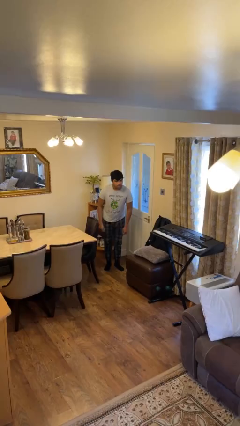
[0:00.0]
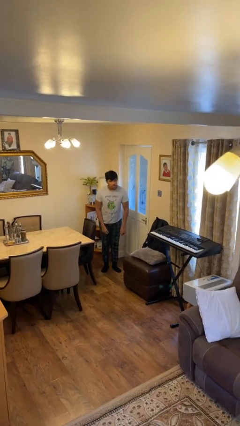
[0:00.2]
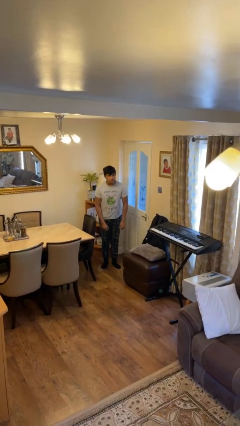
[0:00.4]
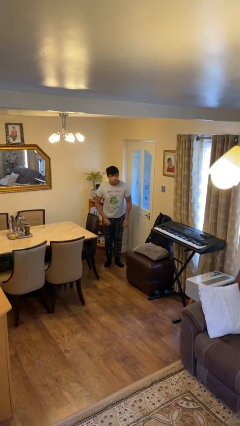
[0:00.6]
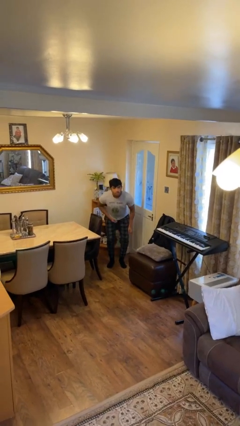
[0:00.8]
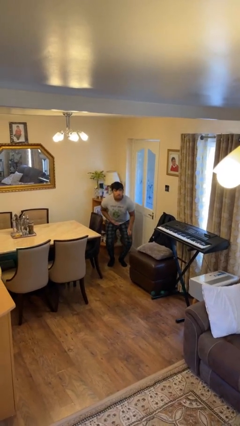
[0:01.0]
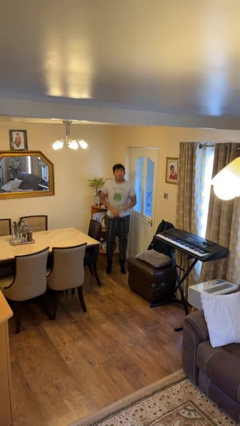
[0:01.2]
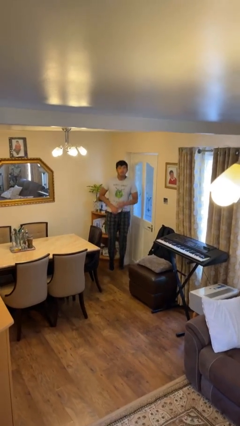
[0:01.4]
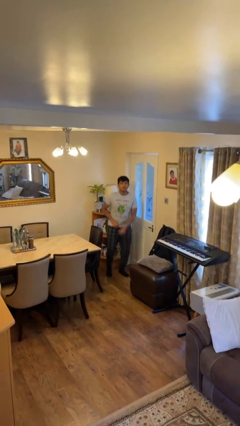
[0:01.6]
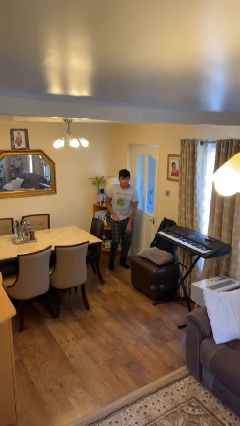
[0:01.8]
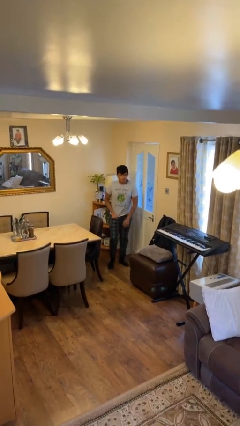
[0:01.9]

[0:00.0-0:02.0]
person jumps

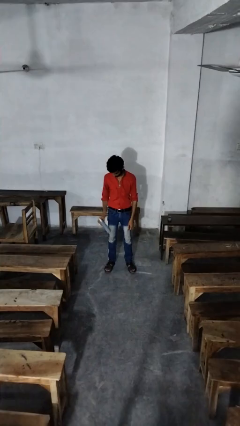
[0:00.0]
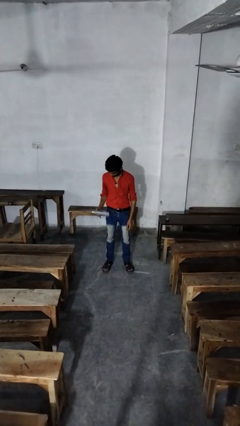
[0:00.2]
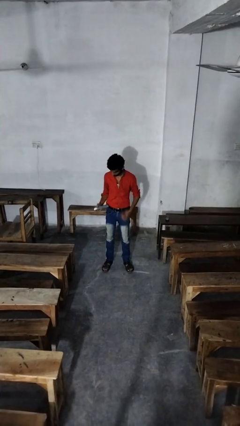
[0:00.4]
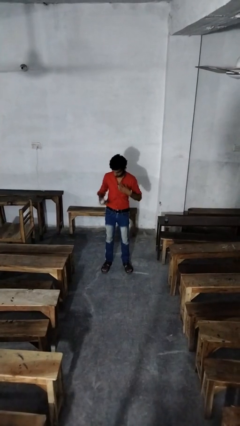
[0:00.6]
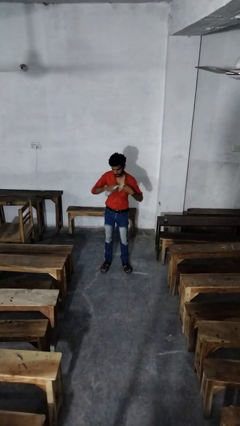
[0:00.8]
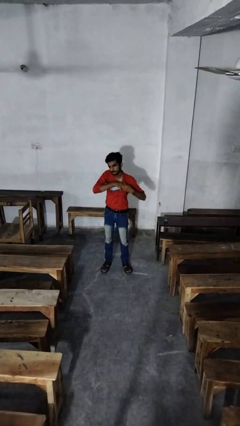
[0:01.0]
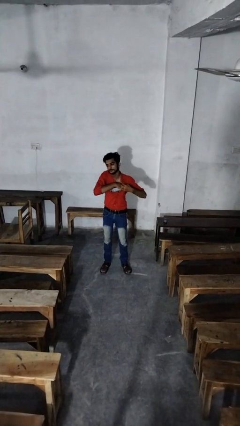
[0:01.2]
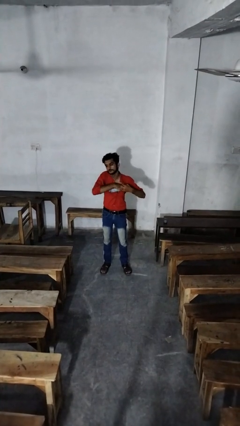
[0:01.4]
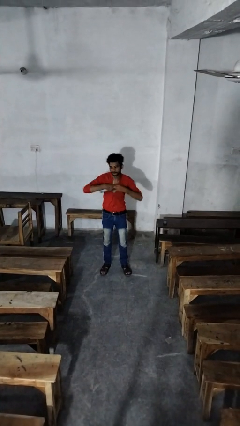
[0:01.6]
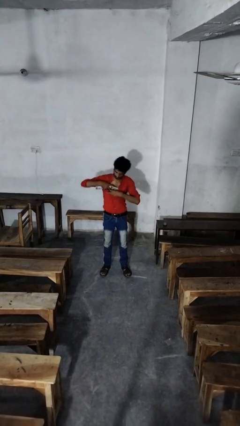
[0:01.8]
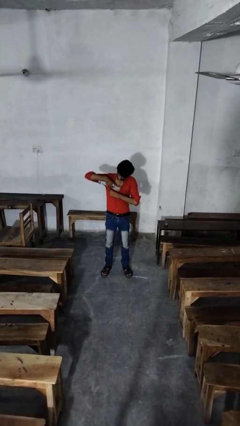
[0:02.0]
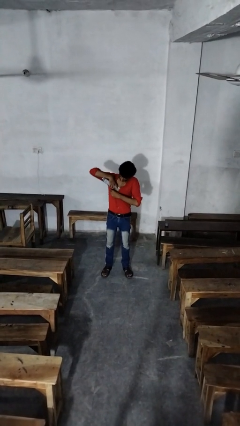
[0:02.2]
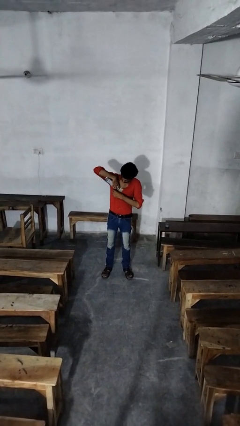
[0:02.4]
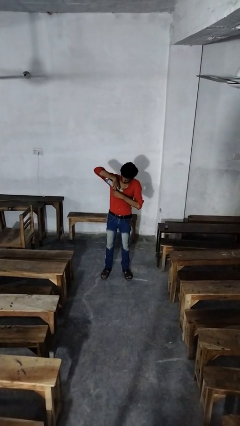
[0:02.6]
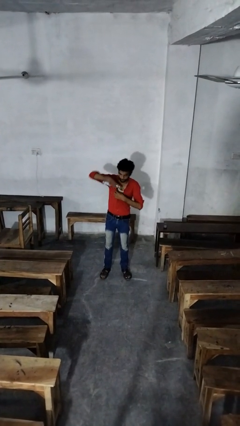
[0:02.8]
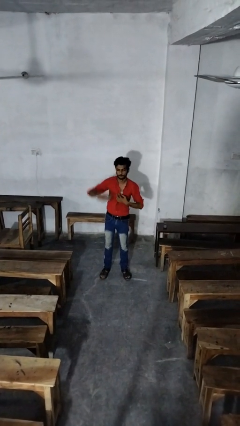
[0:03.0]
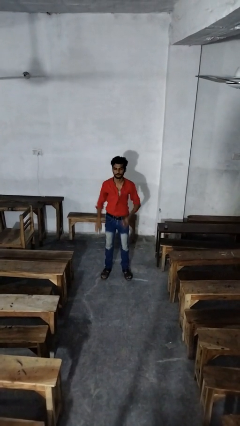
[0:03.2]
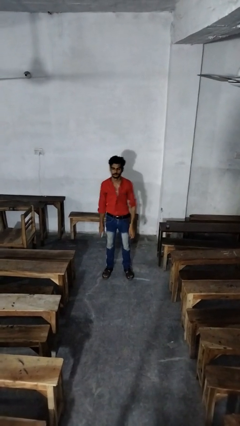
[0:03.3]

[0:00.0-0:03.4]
person applies deodorant

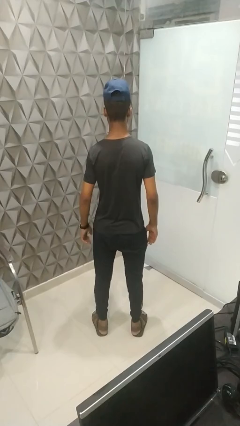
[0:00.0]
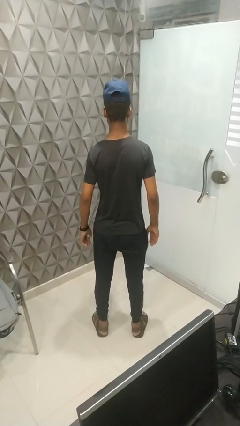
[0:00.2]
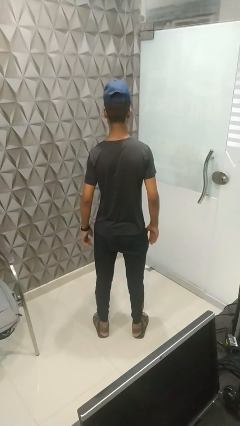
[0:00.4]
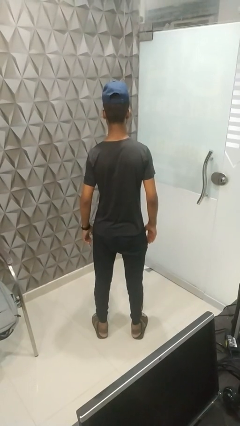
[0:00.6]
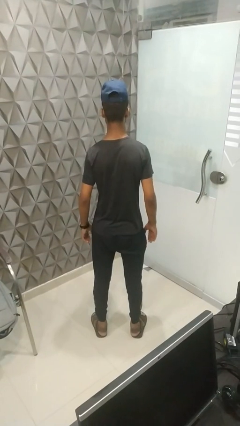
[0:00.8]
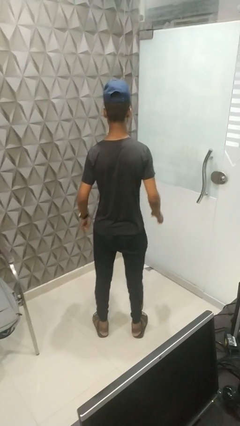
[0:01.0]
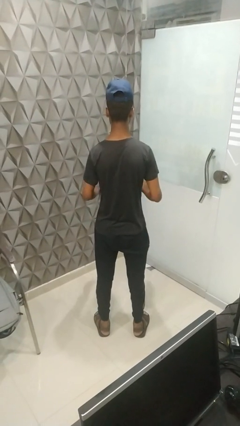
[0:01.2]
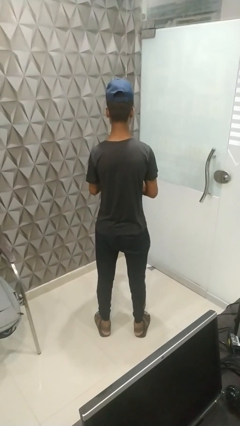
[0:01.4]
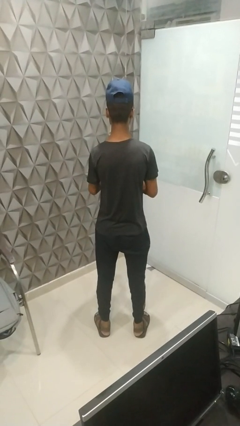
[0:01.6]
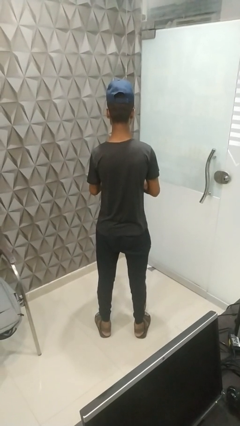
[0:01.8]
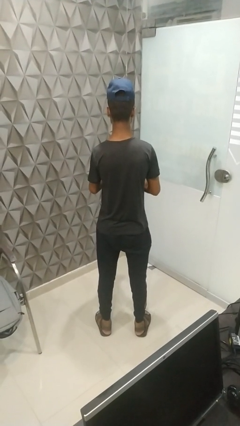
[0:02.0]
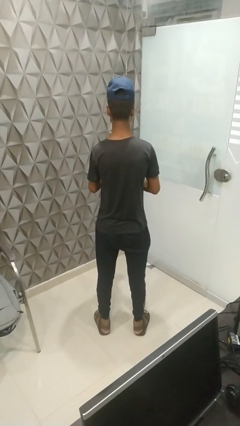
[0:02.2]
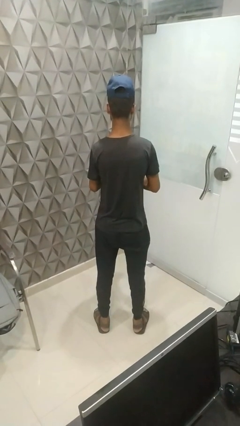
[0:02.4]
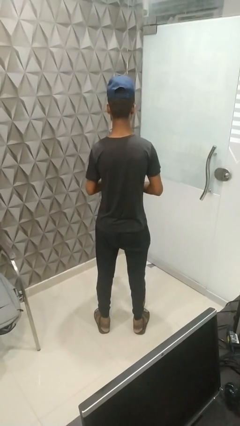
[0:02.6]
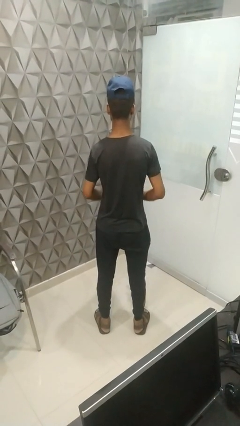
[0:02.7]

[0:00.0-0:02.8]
person claps hands

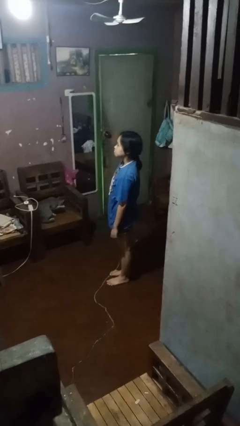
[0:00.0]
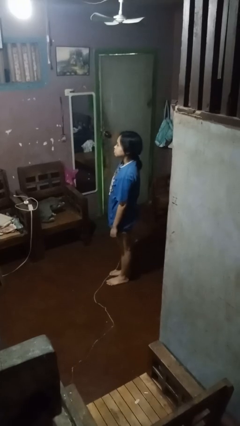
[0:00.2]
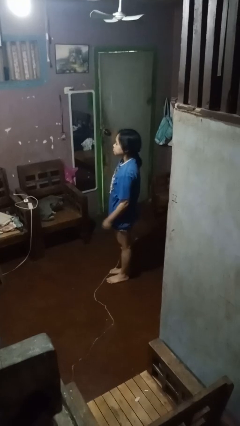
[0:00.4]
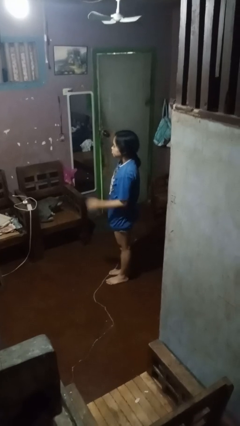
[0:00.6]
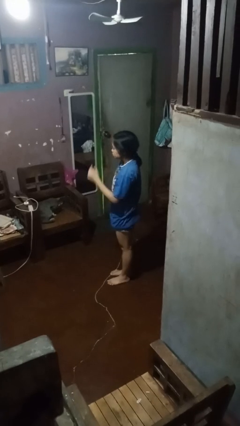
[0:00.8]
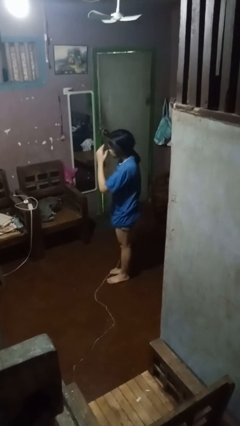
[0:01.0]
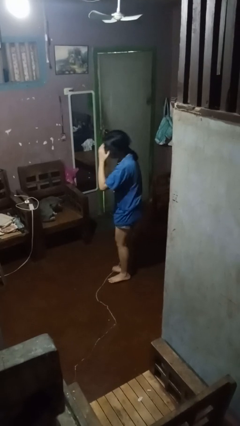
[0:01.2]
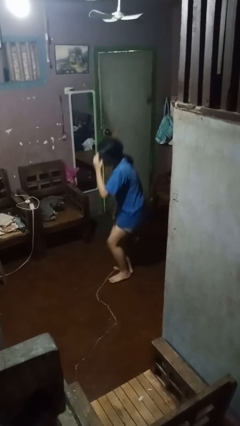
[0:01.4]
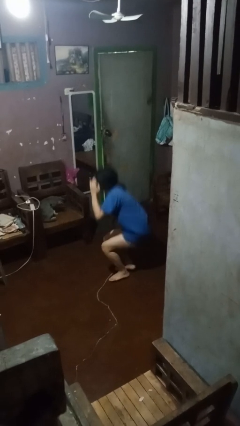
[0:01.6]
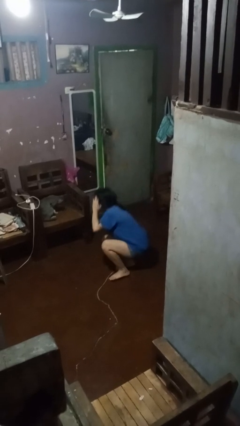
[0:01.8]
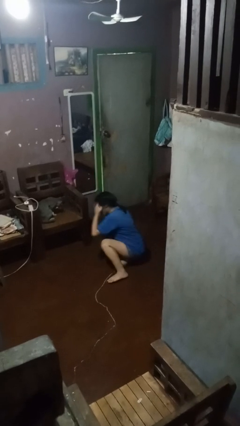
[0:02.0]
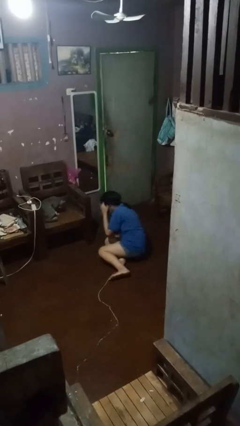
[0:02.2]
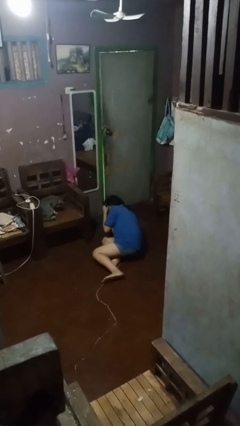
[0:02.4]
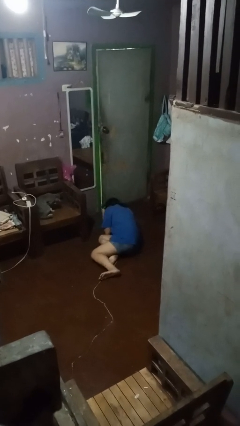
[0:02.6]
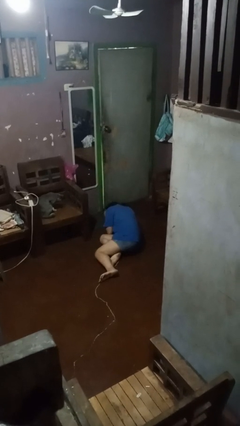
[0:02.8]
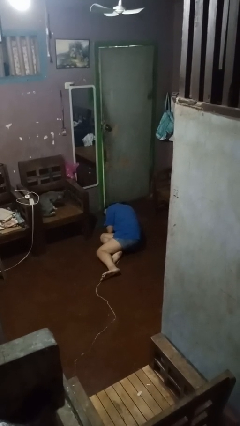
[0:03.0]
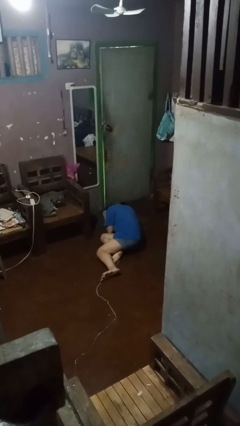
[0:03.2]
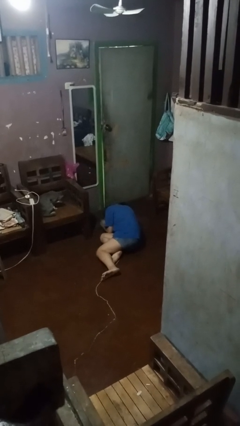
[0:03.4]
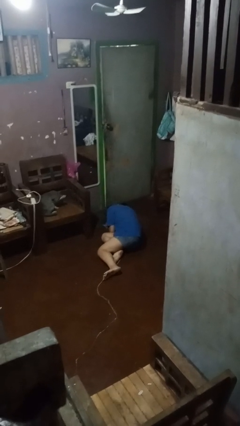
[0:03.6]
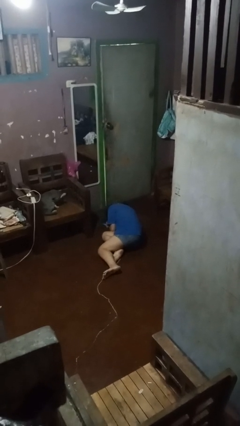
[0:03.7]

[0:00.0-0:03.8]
person falls while standing

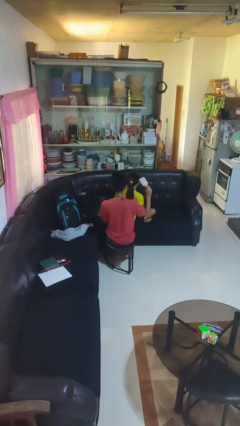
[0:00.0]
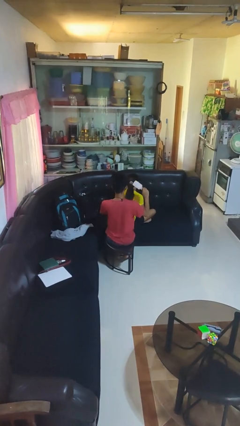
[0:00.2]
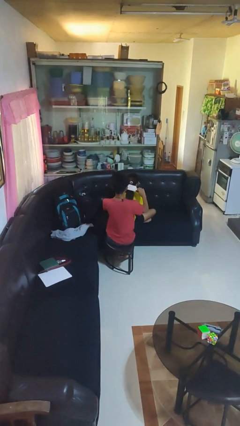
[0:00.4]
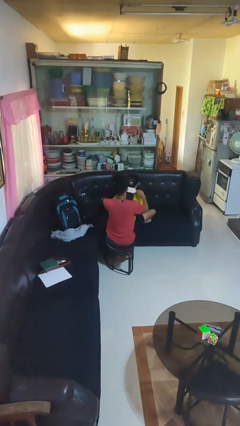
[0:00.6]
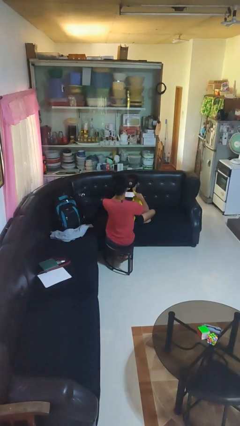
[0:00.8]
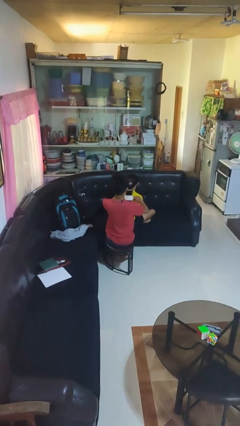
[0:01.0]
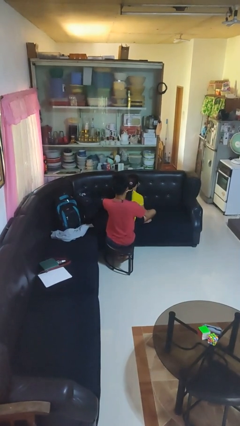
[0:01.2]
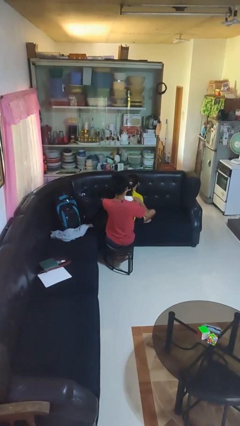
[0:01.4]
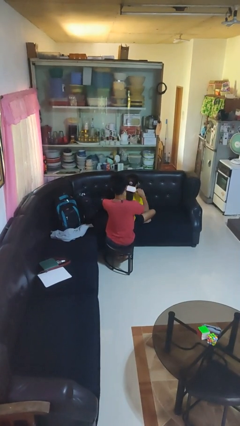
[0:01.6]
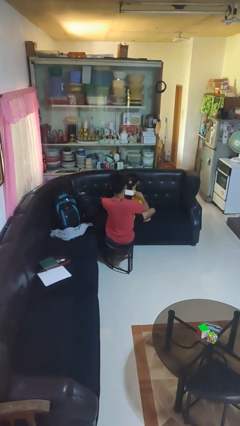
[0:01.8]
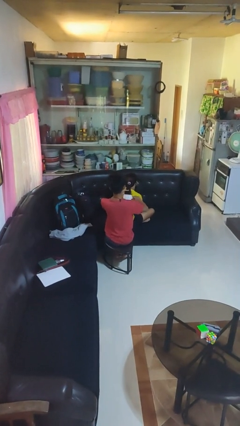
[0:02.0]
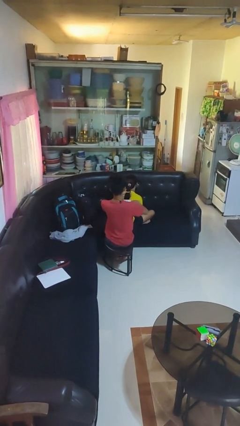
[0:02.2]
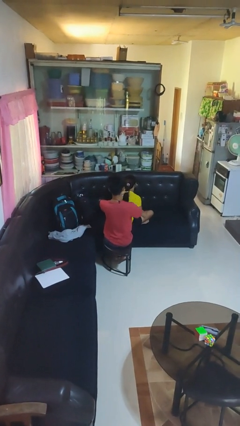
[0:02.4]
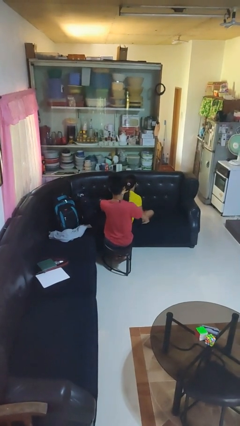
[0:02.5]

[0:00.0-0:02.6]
person brushes hair of person

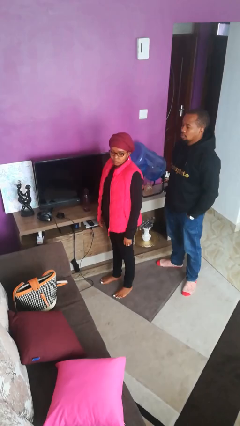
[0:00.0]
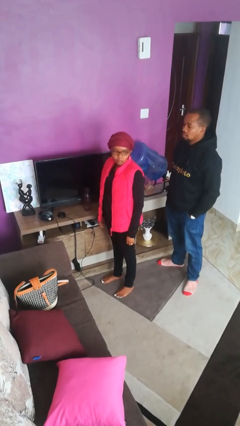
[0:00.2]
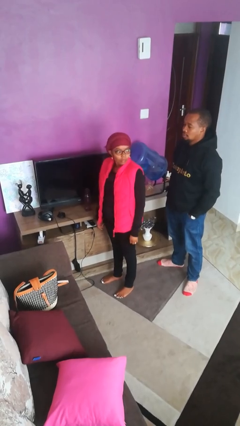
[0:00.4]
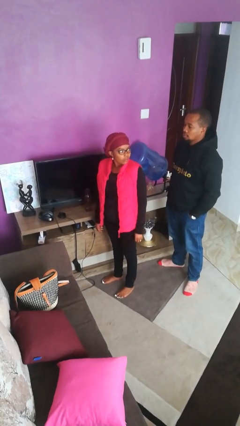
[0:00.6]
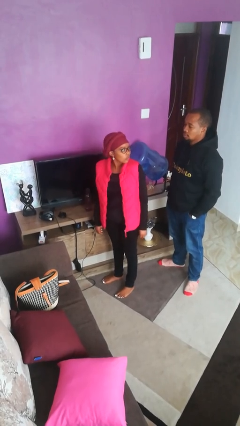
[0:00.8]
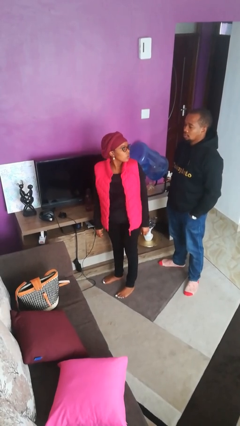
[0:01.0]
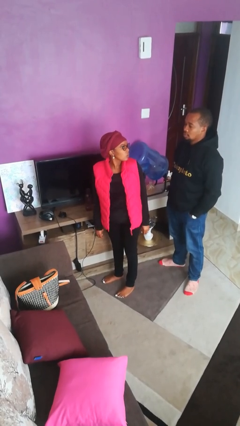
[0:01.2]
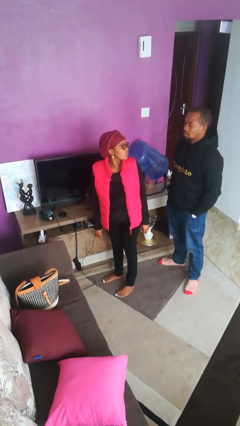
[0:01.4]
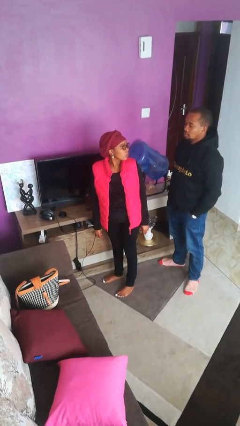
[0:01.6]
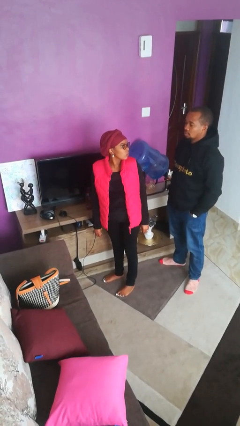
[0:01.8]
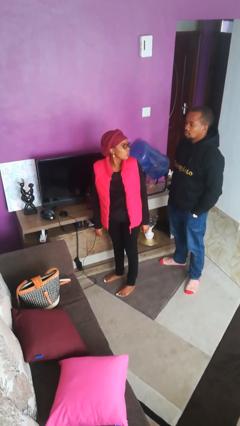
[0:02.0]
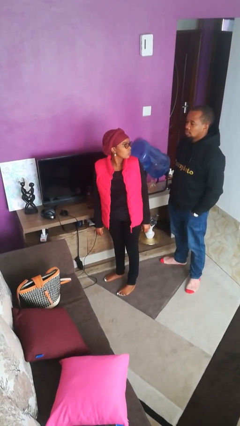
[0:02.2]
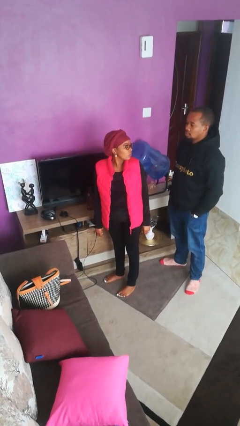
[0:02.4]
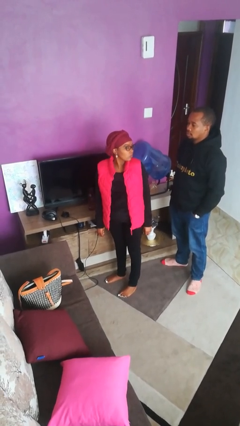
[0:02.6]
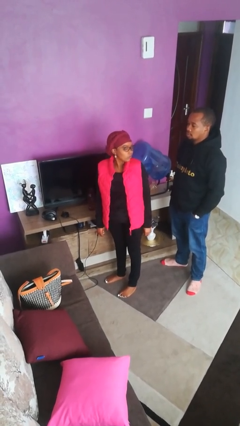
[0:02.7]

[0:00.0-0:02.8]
person looks over shoulder

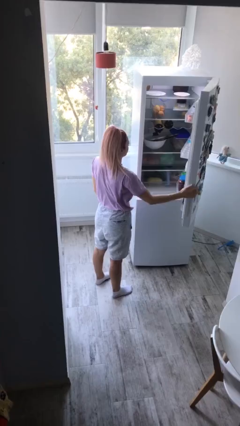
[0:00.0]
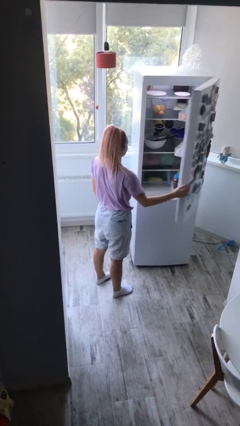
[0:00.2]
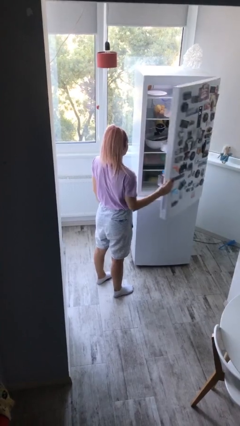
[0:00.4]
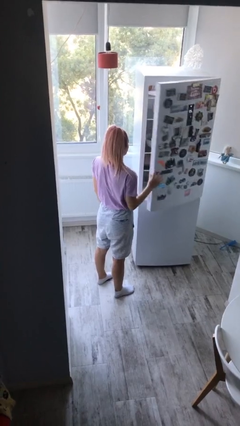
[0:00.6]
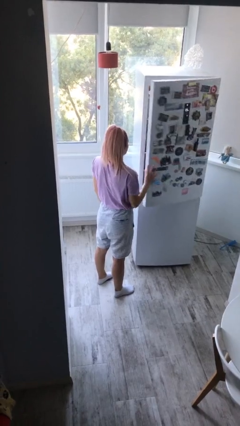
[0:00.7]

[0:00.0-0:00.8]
person closes refrigerator
